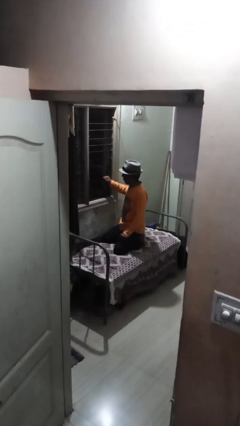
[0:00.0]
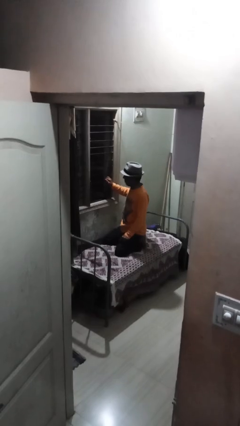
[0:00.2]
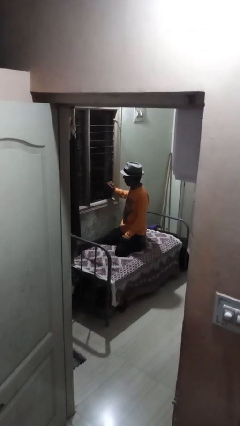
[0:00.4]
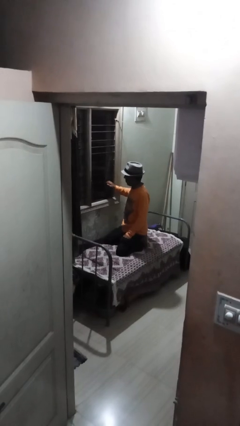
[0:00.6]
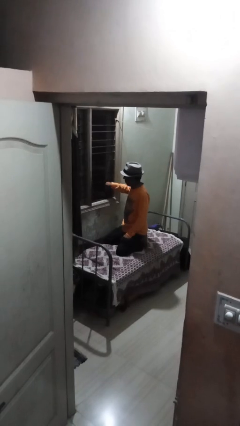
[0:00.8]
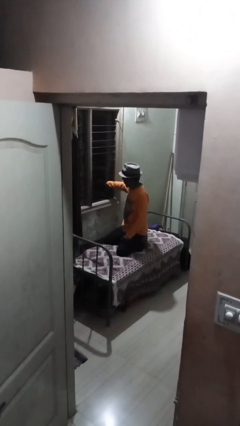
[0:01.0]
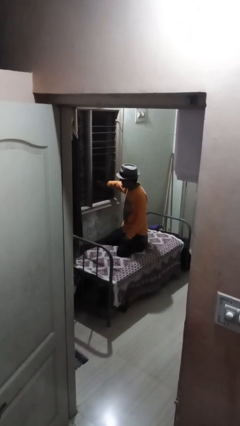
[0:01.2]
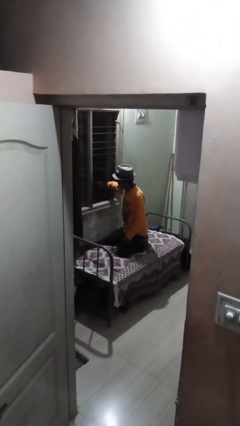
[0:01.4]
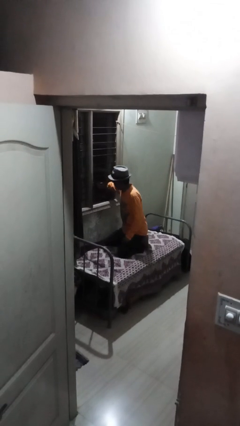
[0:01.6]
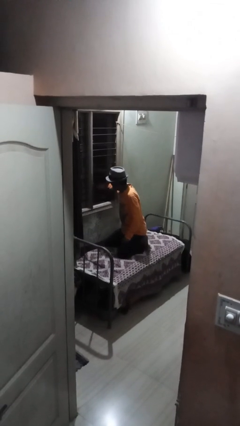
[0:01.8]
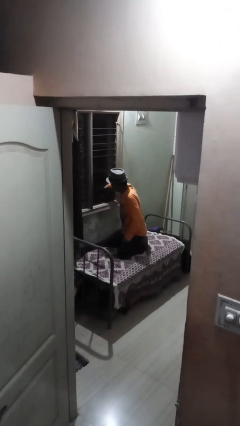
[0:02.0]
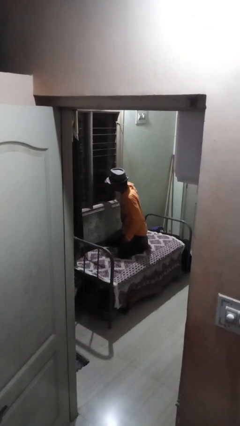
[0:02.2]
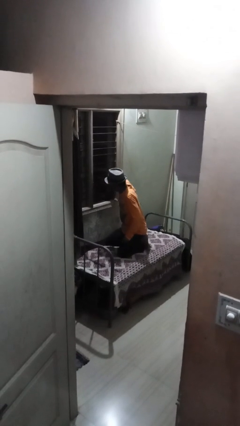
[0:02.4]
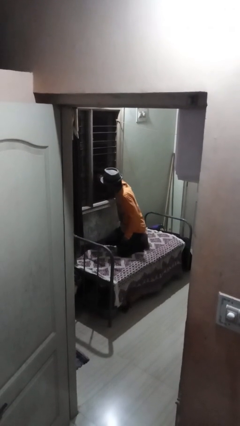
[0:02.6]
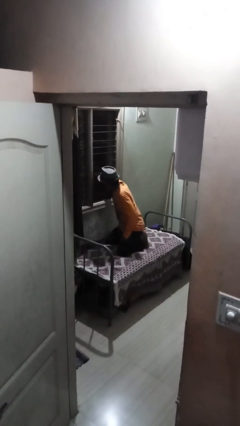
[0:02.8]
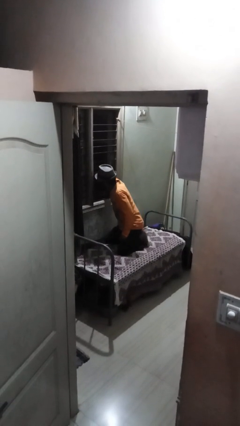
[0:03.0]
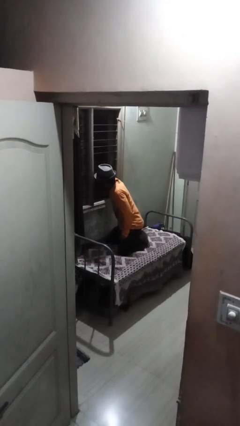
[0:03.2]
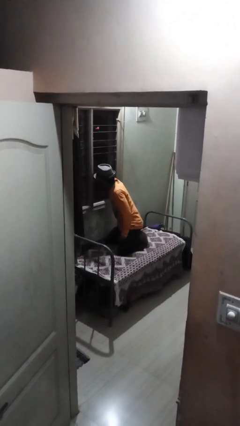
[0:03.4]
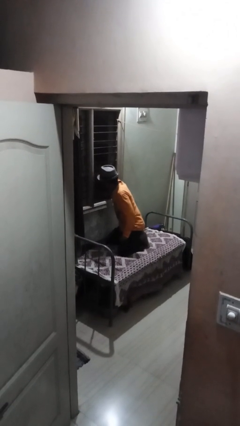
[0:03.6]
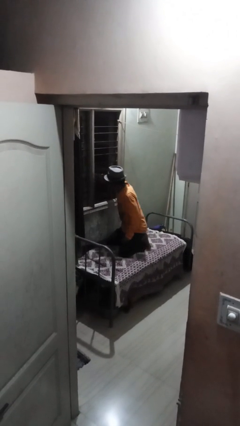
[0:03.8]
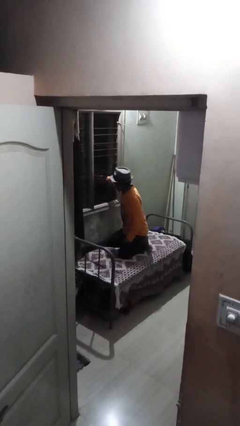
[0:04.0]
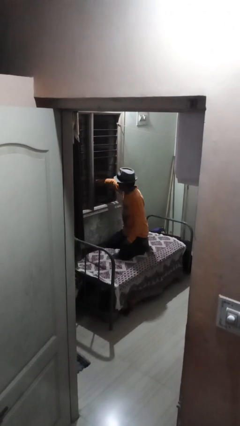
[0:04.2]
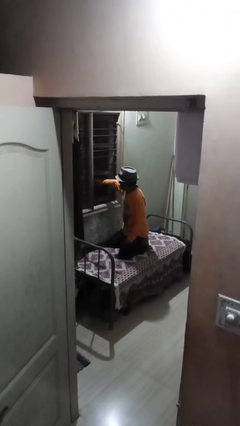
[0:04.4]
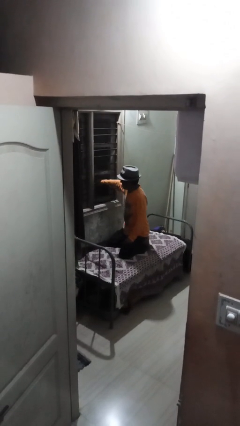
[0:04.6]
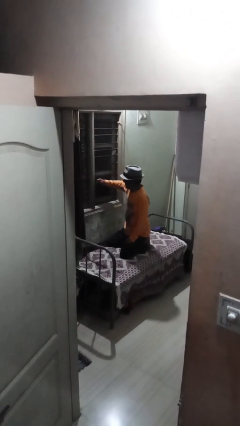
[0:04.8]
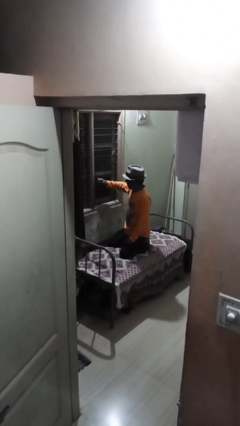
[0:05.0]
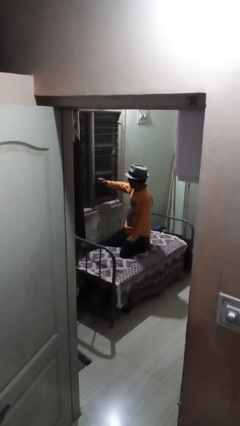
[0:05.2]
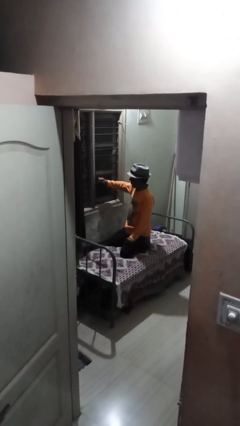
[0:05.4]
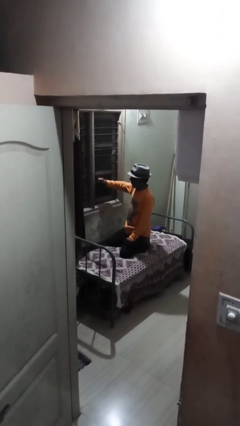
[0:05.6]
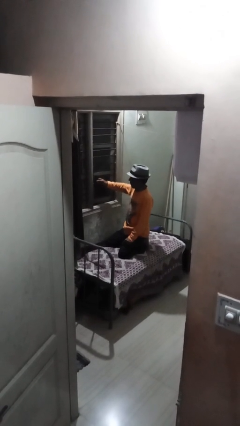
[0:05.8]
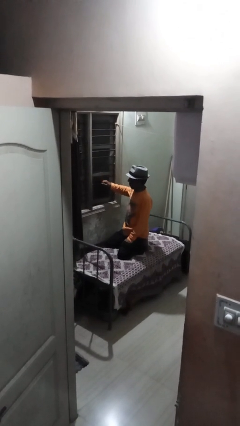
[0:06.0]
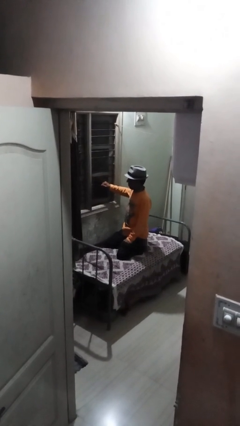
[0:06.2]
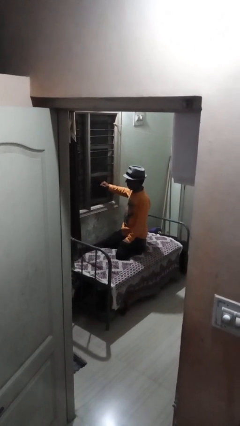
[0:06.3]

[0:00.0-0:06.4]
person closes home window

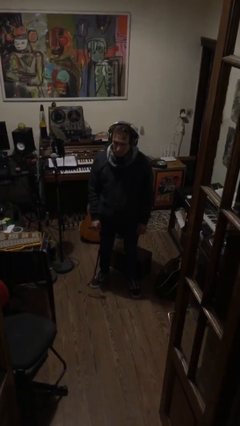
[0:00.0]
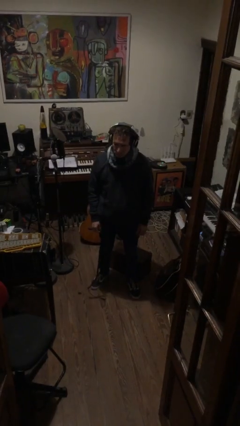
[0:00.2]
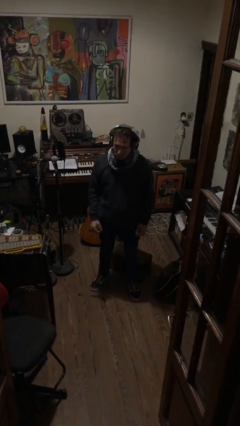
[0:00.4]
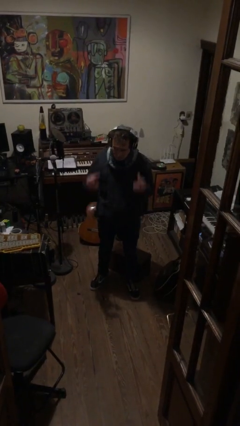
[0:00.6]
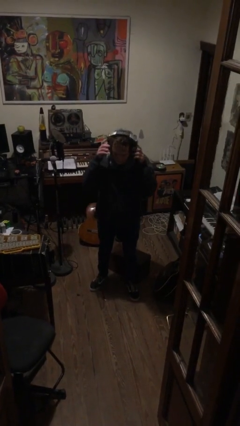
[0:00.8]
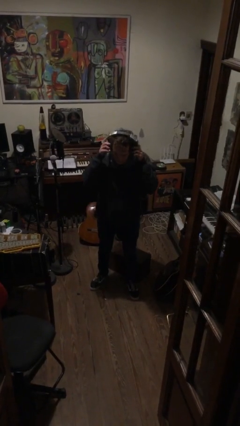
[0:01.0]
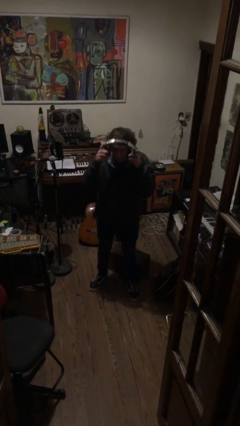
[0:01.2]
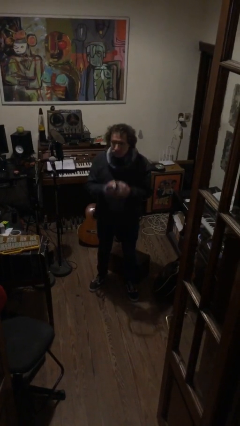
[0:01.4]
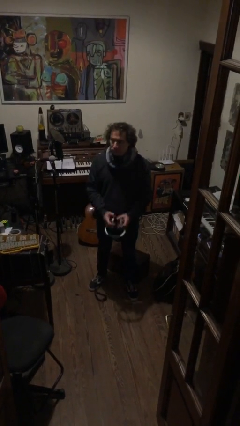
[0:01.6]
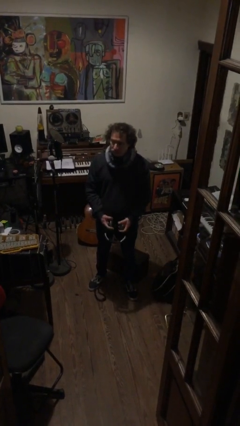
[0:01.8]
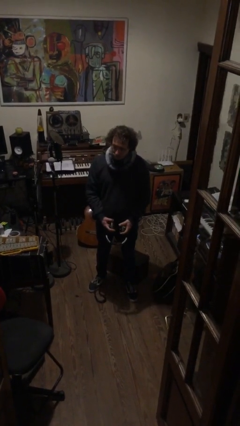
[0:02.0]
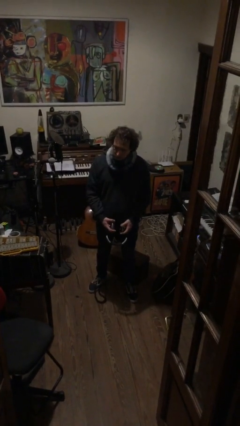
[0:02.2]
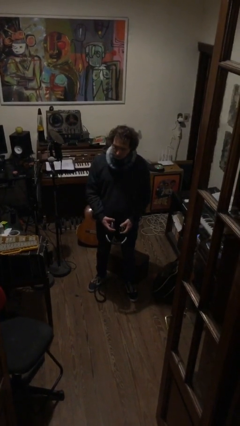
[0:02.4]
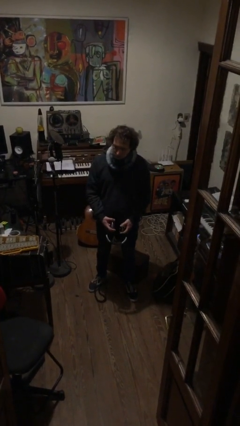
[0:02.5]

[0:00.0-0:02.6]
person takes off headphones

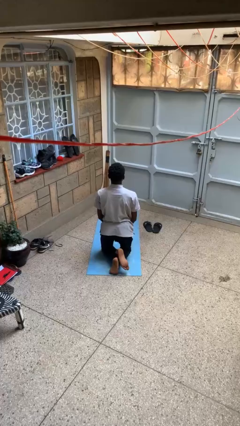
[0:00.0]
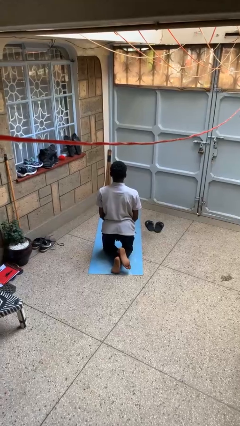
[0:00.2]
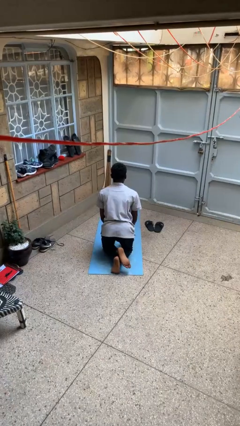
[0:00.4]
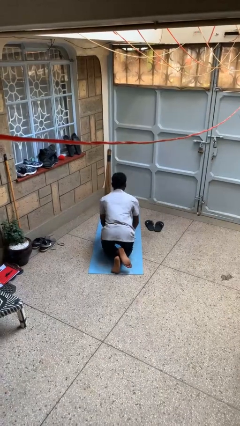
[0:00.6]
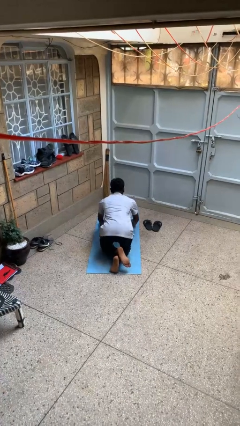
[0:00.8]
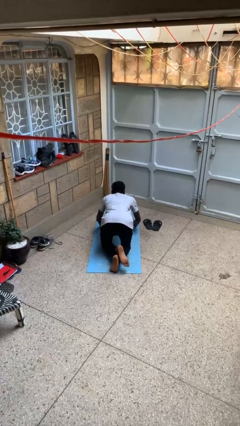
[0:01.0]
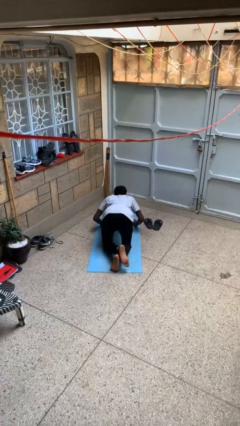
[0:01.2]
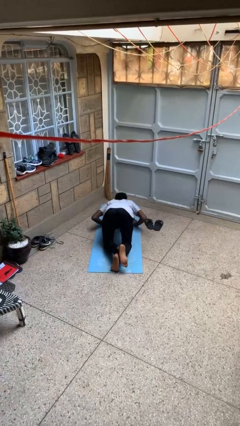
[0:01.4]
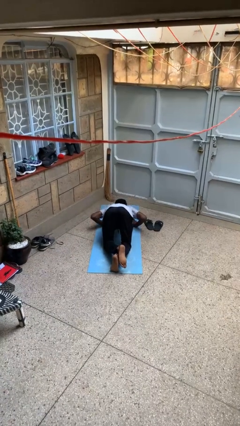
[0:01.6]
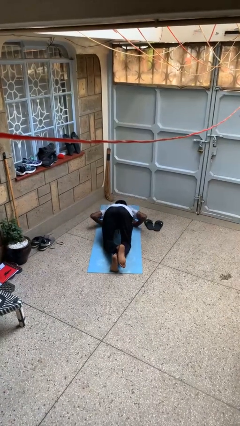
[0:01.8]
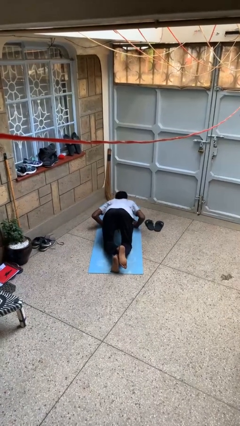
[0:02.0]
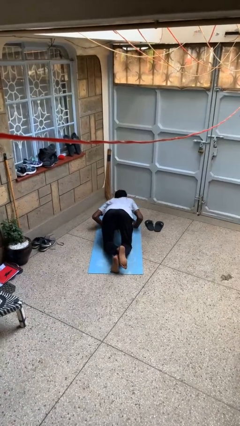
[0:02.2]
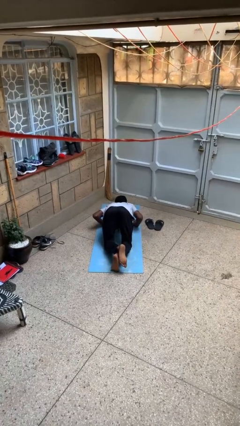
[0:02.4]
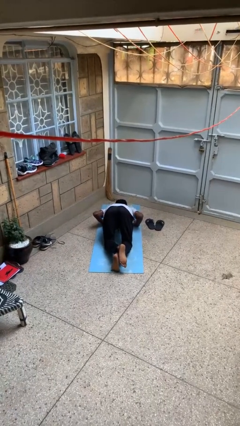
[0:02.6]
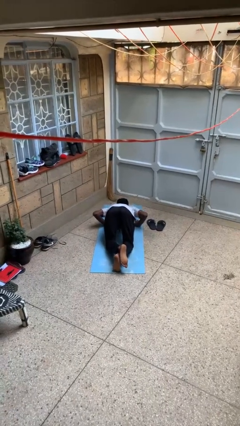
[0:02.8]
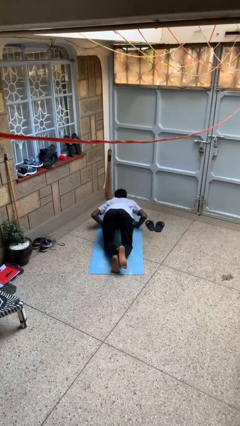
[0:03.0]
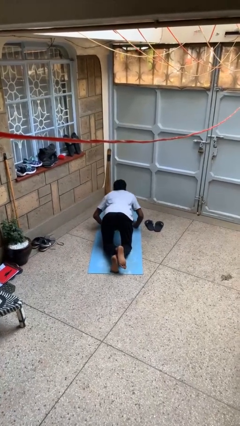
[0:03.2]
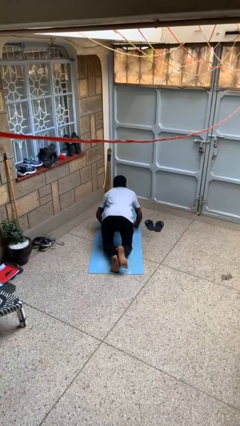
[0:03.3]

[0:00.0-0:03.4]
person exercises with pushup

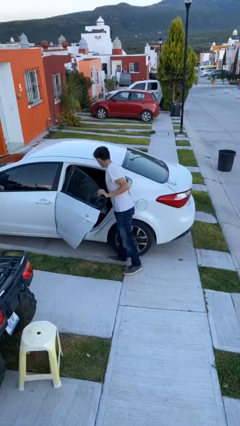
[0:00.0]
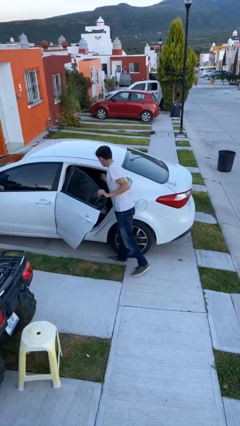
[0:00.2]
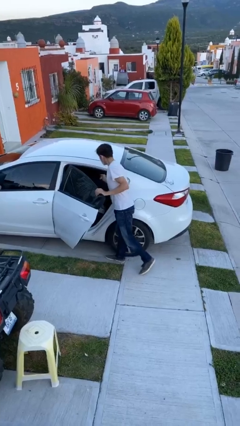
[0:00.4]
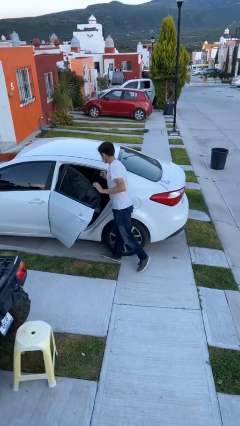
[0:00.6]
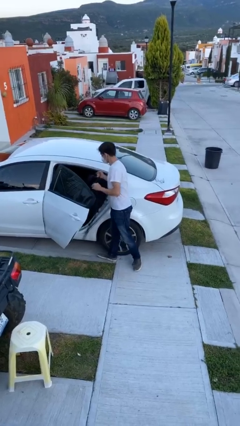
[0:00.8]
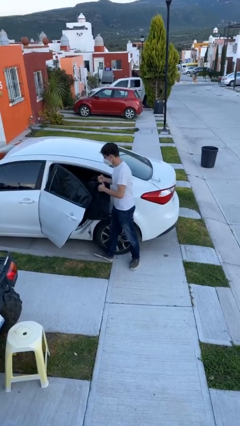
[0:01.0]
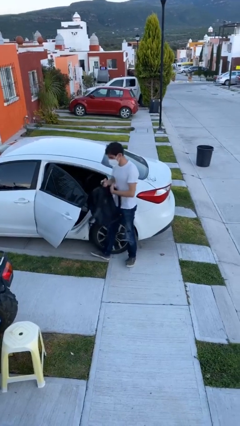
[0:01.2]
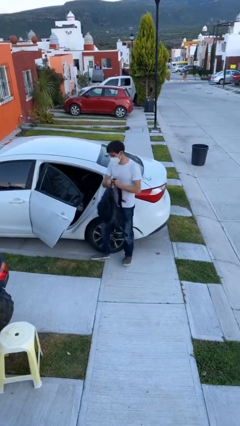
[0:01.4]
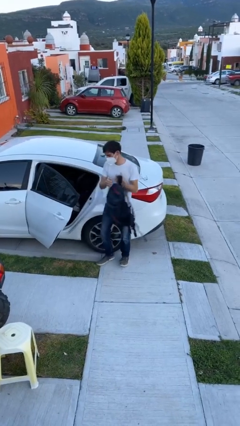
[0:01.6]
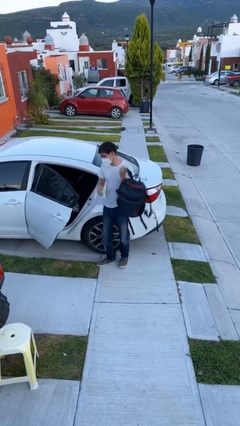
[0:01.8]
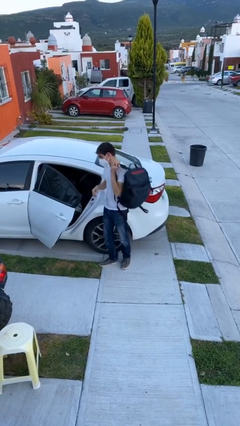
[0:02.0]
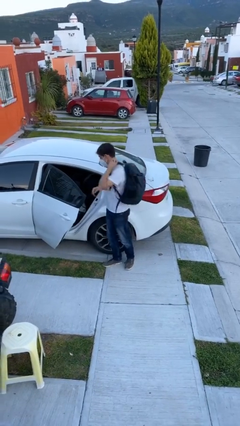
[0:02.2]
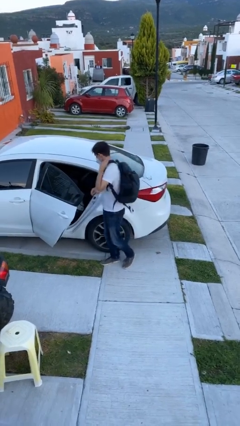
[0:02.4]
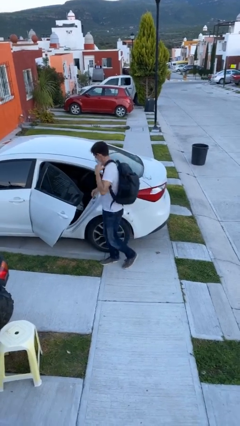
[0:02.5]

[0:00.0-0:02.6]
person unloads car

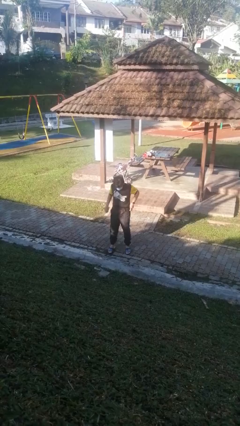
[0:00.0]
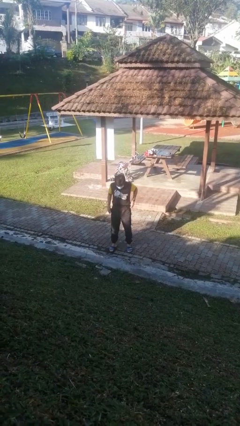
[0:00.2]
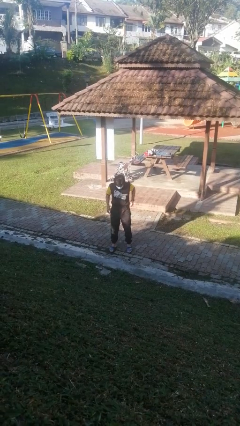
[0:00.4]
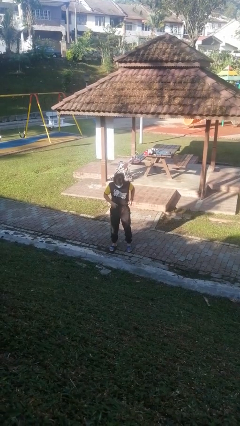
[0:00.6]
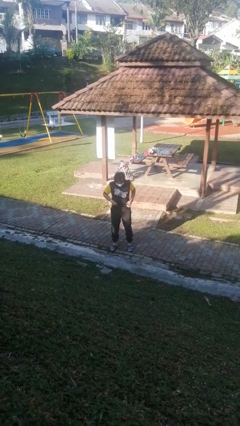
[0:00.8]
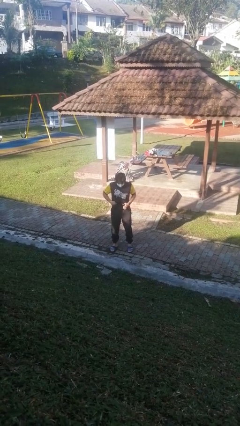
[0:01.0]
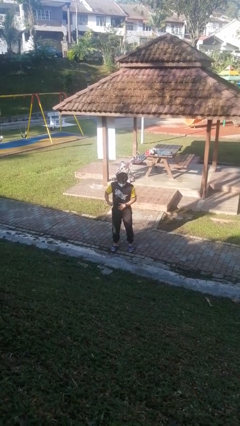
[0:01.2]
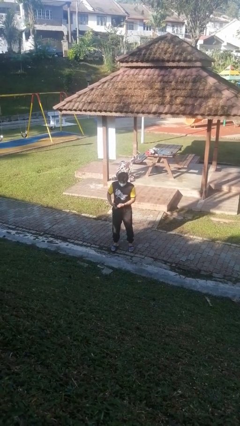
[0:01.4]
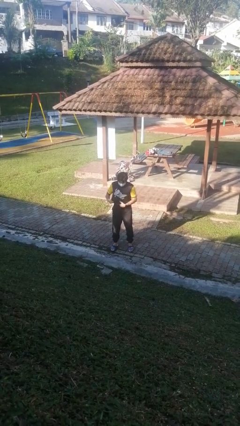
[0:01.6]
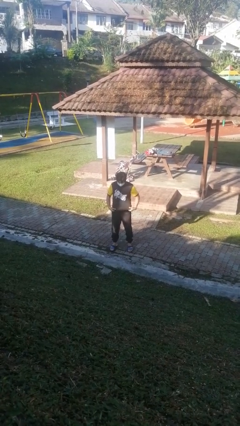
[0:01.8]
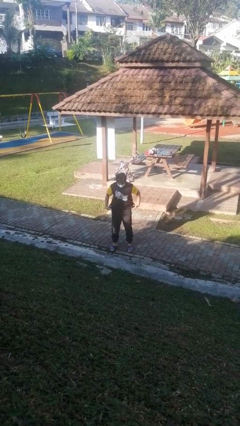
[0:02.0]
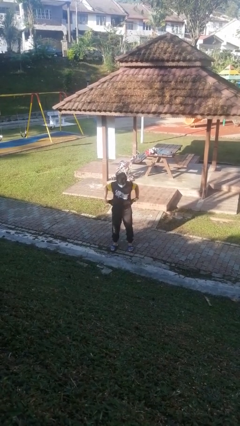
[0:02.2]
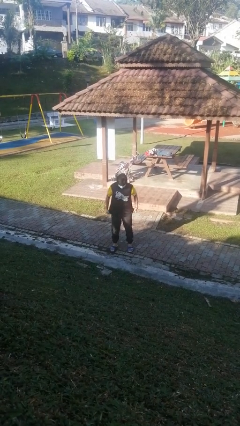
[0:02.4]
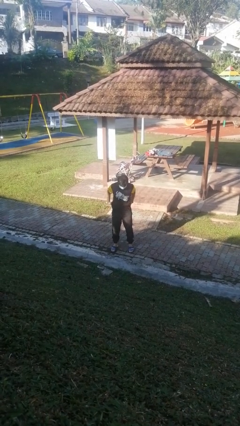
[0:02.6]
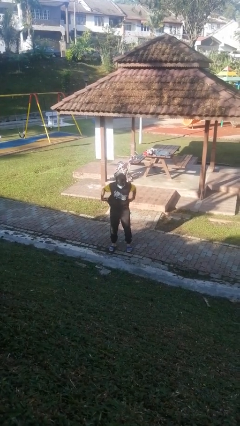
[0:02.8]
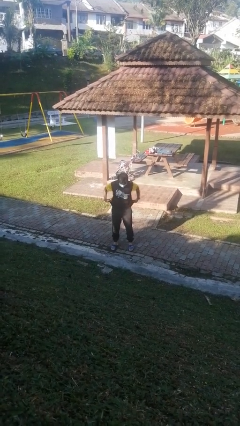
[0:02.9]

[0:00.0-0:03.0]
person untucks shirt
